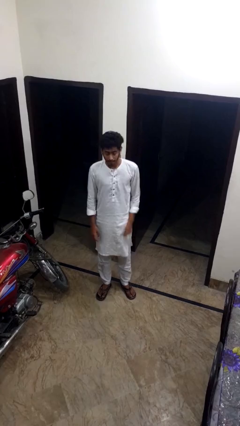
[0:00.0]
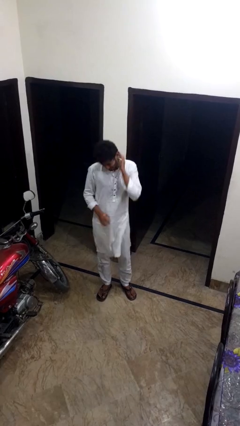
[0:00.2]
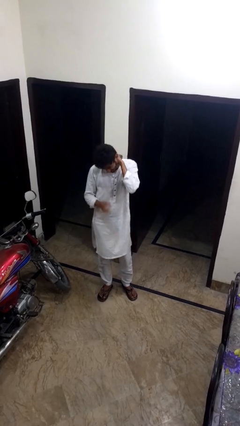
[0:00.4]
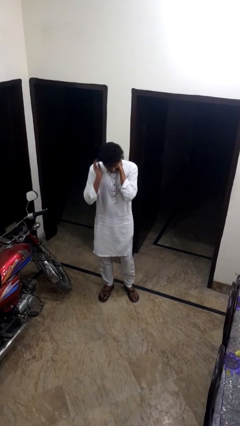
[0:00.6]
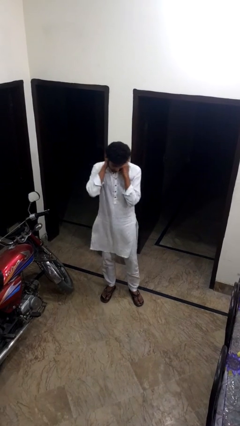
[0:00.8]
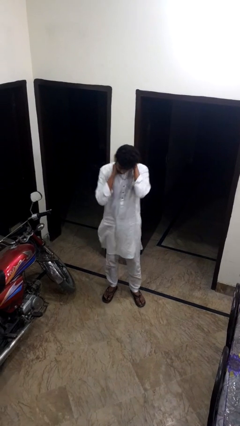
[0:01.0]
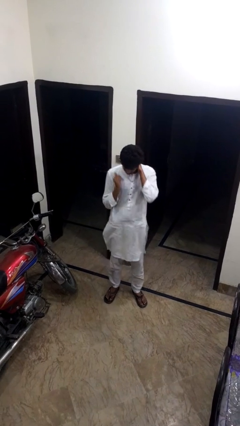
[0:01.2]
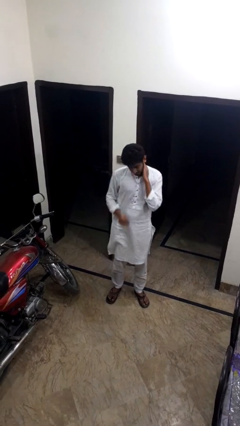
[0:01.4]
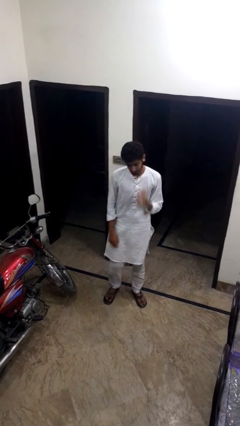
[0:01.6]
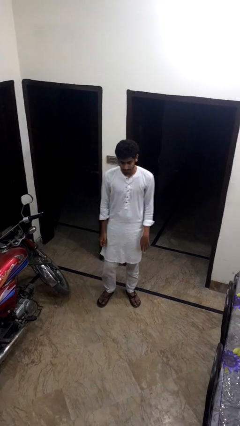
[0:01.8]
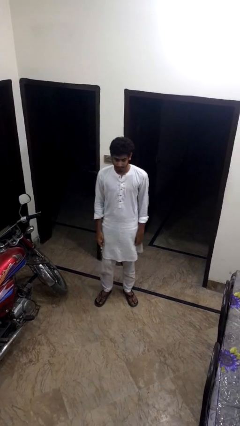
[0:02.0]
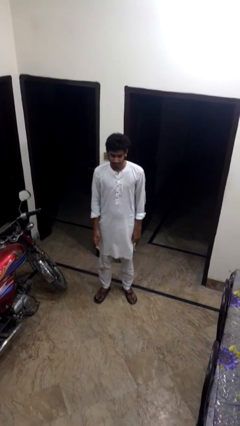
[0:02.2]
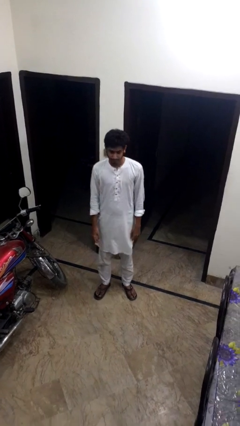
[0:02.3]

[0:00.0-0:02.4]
person rubs neck

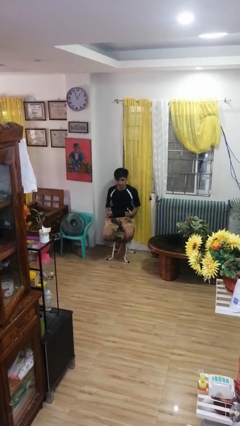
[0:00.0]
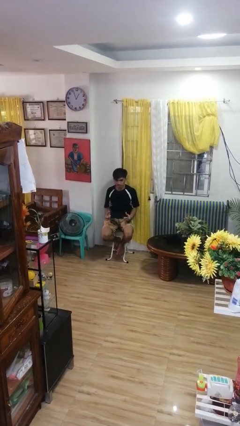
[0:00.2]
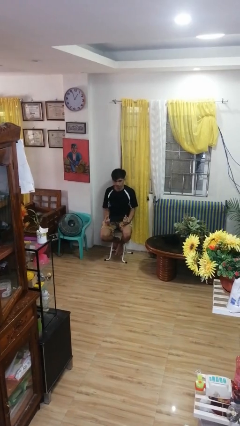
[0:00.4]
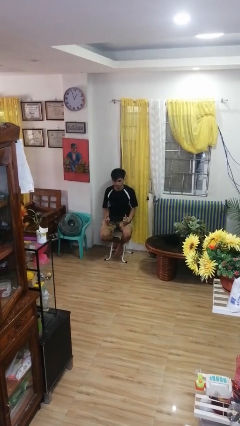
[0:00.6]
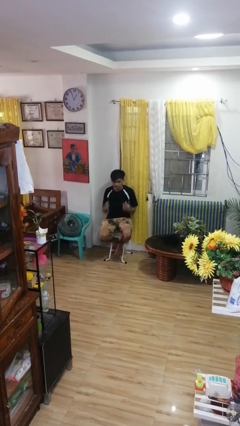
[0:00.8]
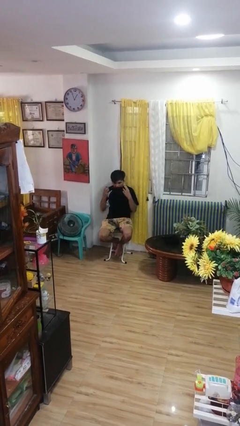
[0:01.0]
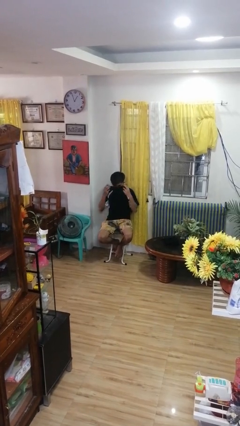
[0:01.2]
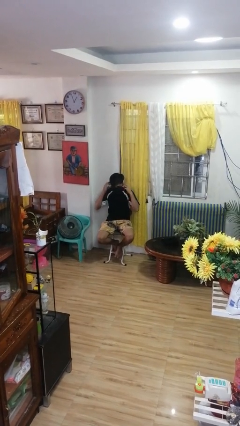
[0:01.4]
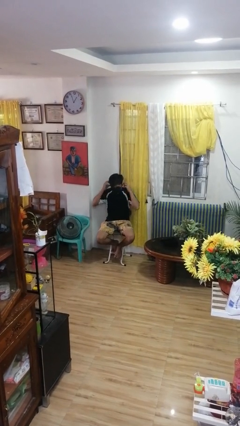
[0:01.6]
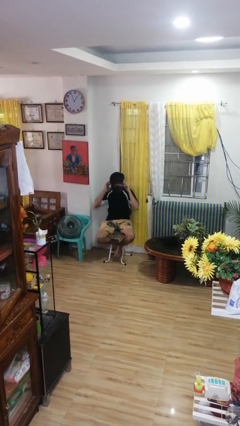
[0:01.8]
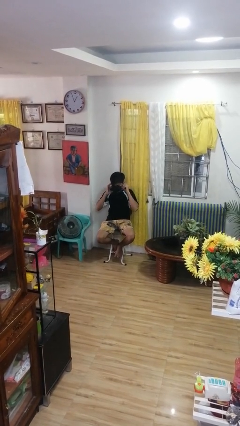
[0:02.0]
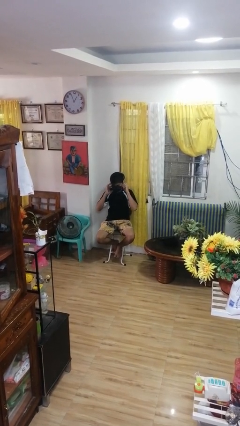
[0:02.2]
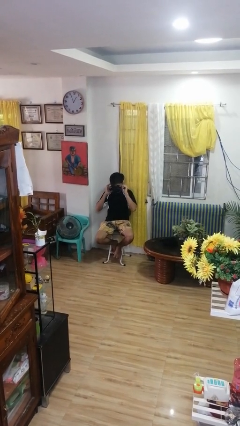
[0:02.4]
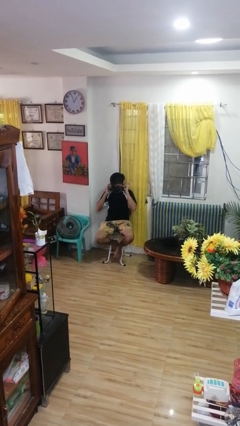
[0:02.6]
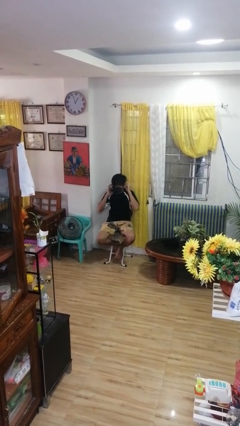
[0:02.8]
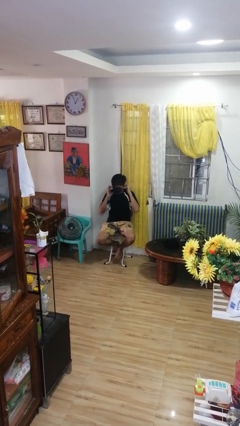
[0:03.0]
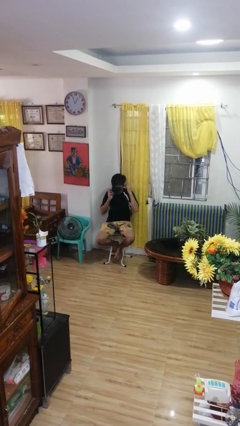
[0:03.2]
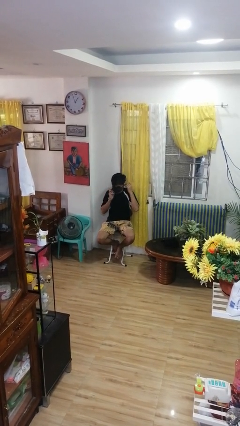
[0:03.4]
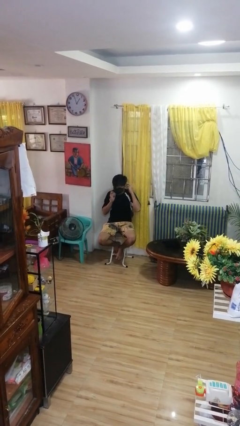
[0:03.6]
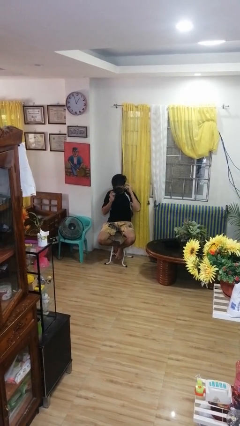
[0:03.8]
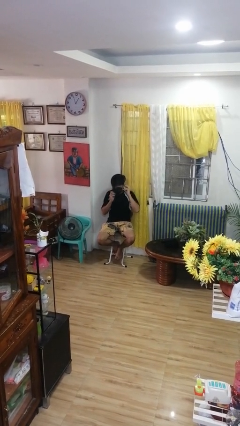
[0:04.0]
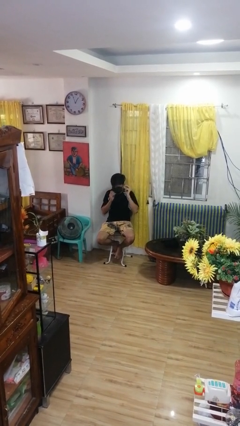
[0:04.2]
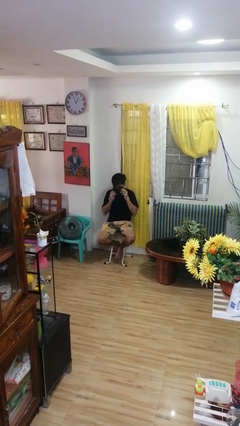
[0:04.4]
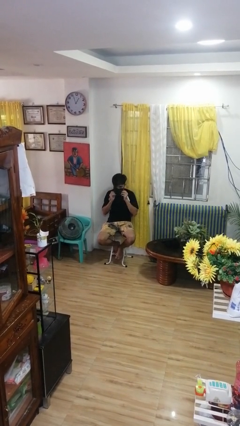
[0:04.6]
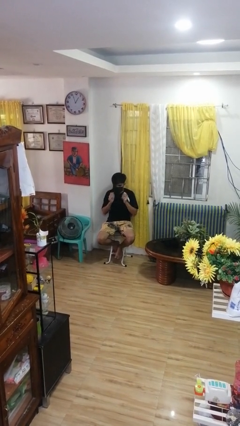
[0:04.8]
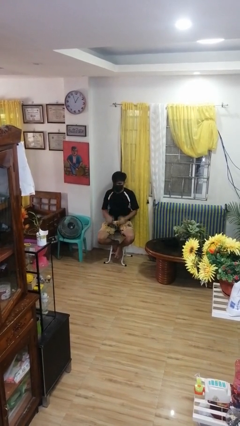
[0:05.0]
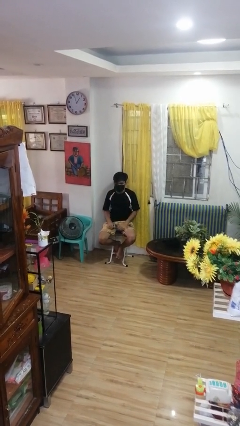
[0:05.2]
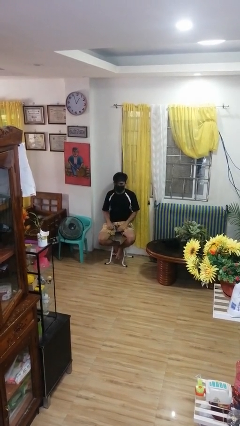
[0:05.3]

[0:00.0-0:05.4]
person puts on facemask

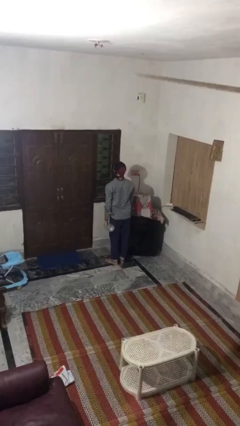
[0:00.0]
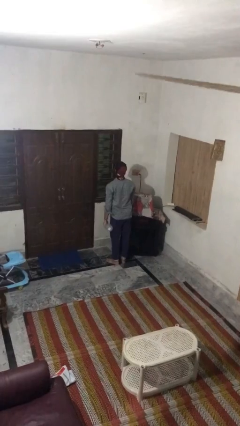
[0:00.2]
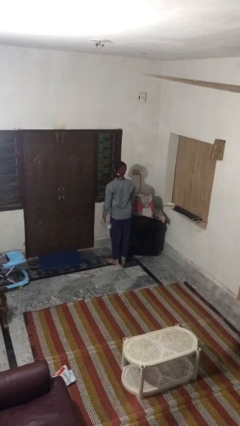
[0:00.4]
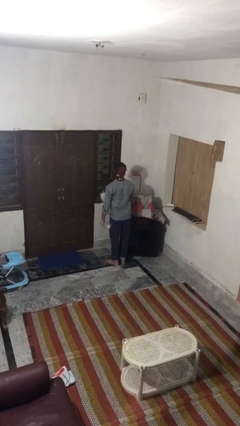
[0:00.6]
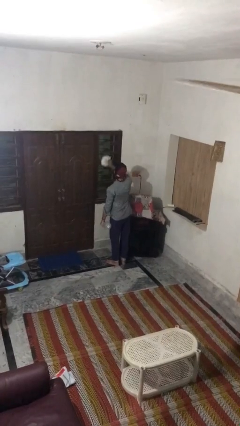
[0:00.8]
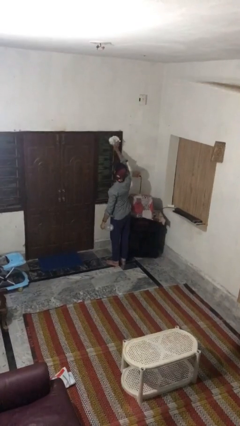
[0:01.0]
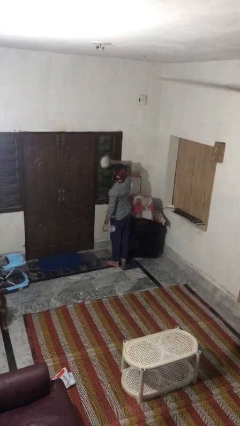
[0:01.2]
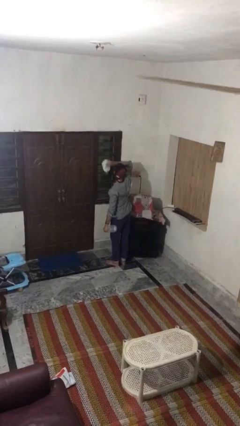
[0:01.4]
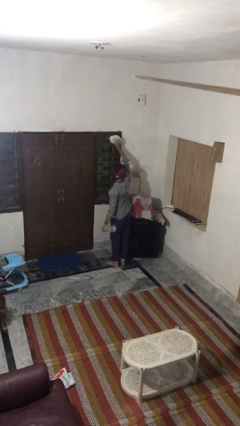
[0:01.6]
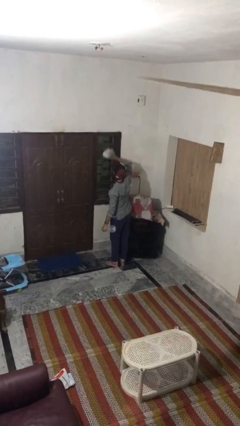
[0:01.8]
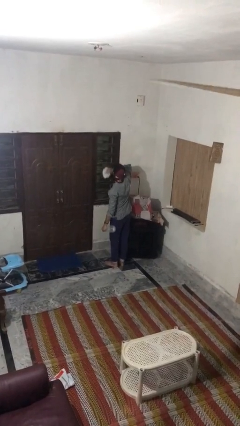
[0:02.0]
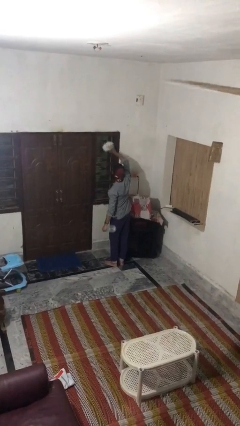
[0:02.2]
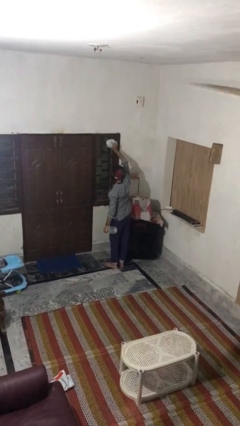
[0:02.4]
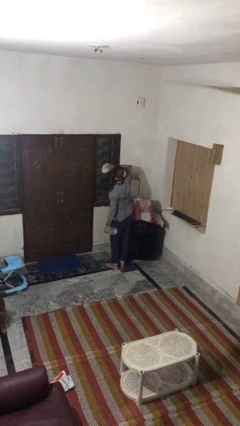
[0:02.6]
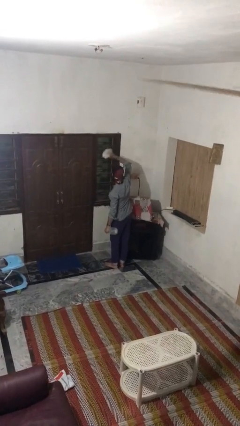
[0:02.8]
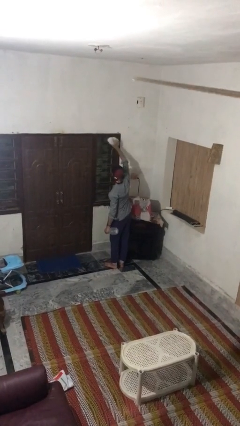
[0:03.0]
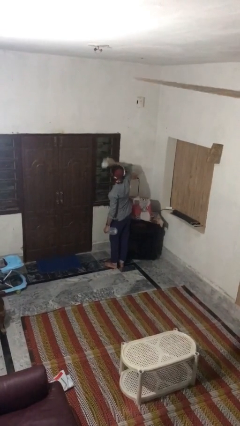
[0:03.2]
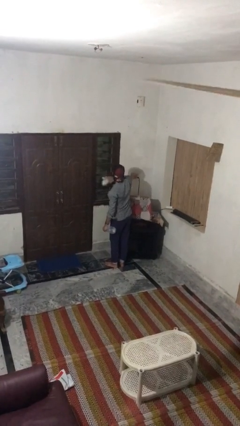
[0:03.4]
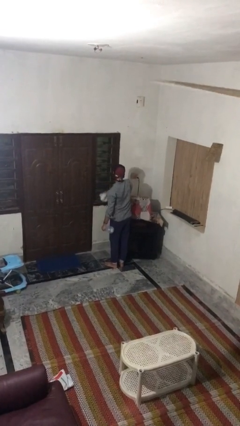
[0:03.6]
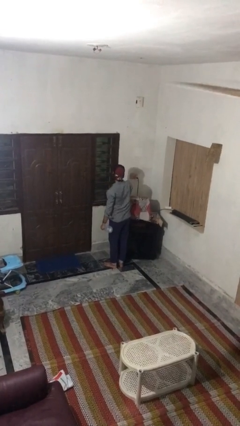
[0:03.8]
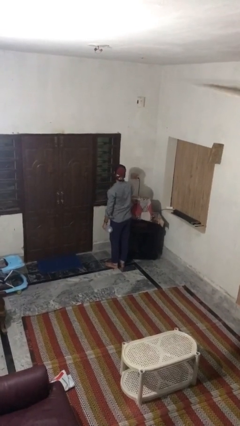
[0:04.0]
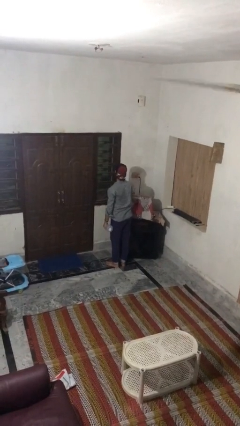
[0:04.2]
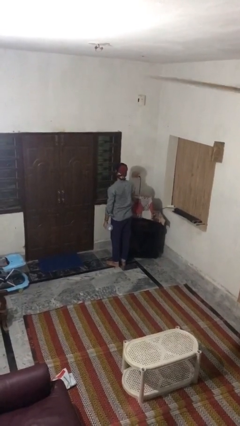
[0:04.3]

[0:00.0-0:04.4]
person washes window

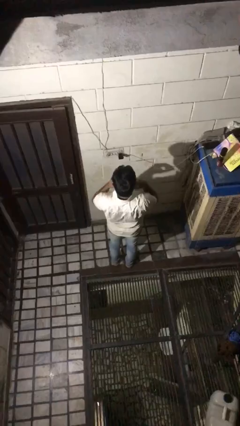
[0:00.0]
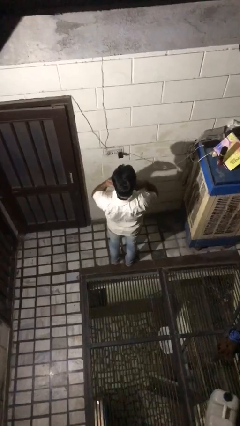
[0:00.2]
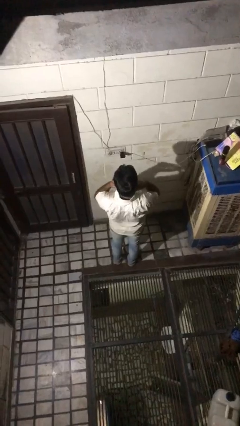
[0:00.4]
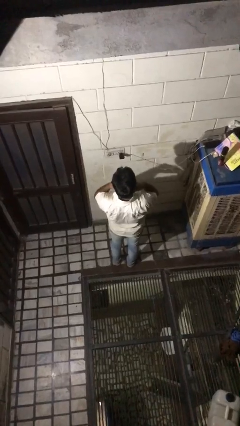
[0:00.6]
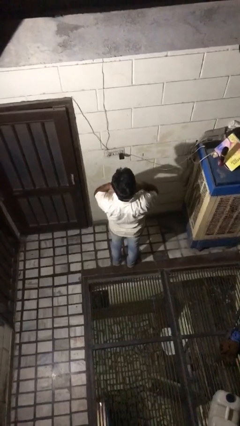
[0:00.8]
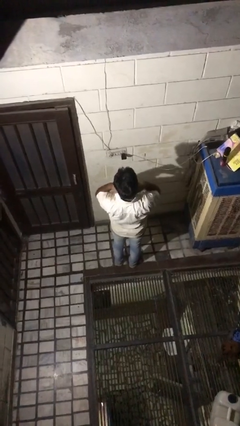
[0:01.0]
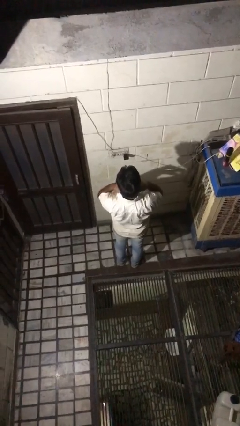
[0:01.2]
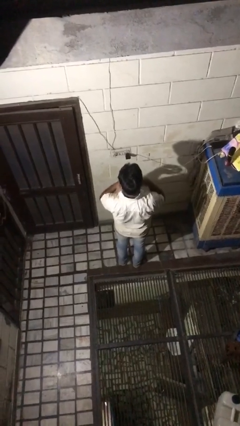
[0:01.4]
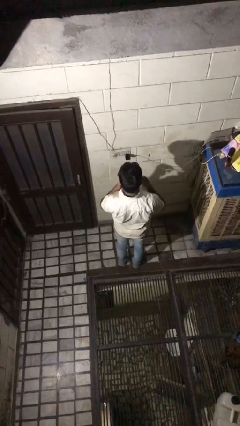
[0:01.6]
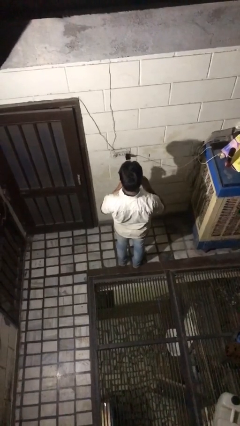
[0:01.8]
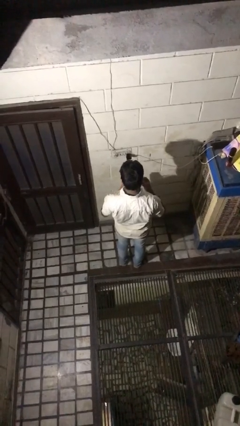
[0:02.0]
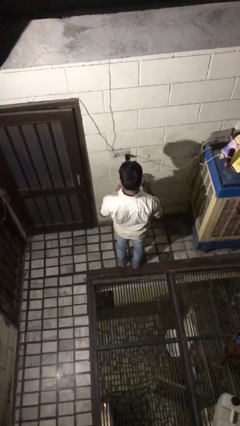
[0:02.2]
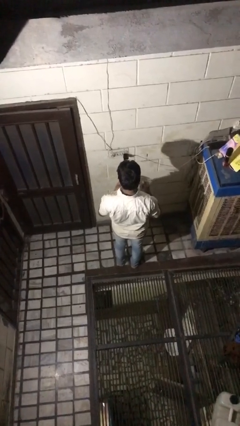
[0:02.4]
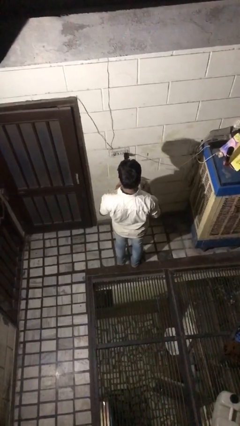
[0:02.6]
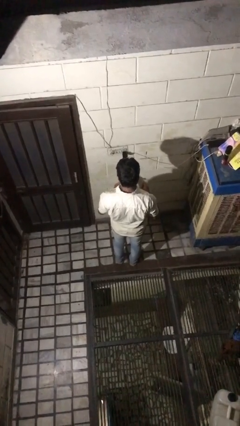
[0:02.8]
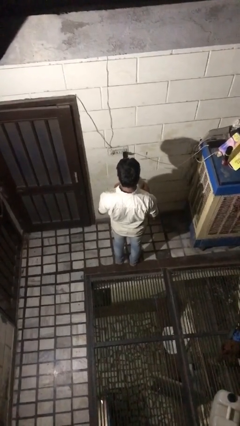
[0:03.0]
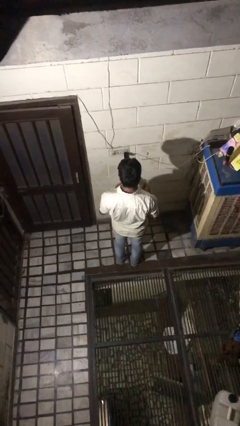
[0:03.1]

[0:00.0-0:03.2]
person takes off necklace

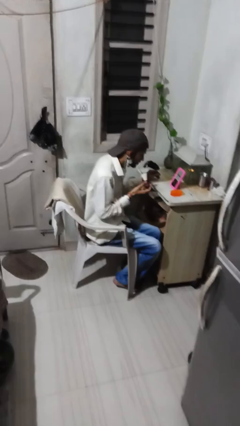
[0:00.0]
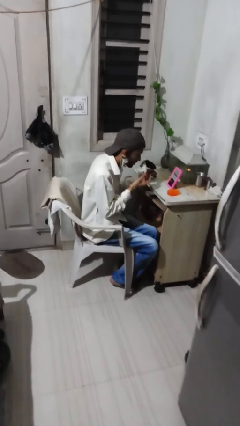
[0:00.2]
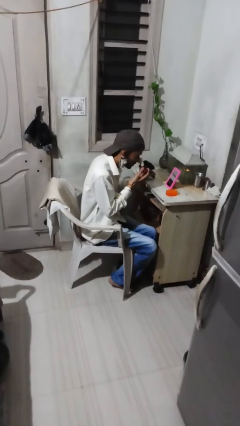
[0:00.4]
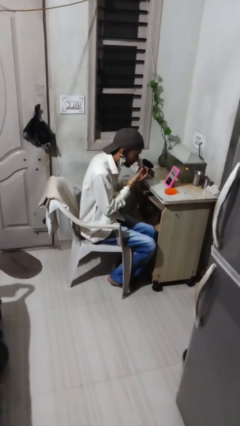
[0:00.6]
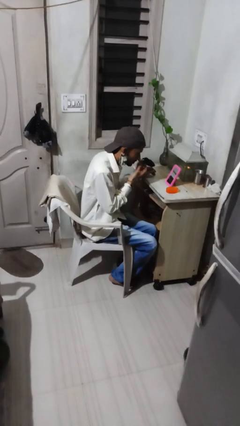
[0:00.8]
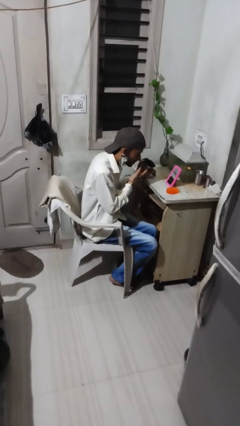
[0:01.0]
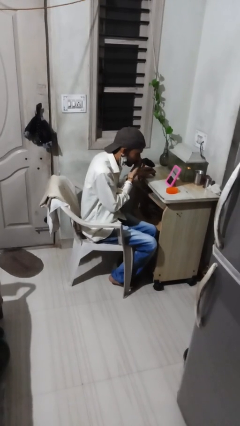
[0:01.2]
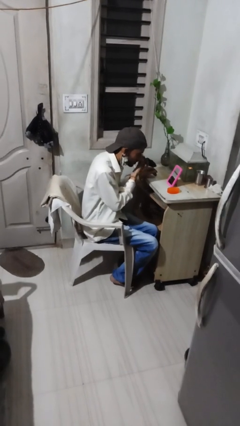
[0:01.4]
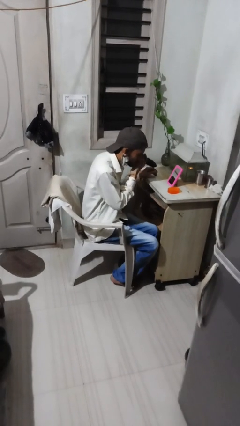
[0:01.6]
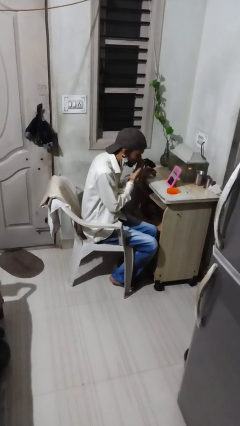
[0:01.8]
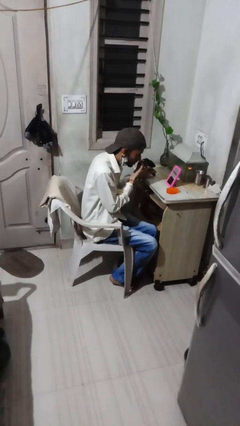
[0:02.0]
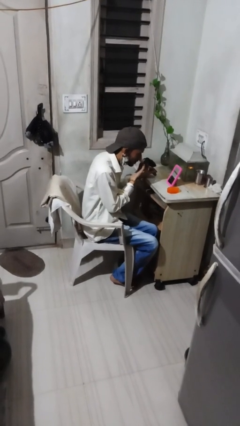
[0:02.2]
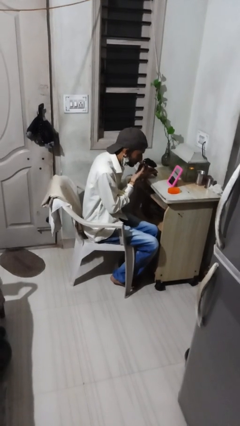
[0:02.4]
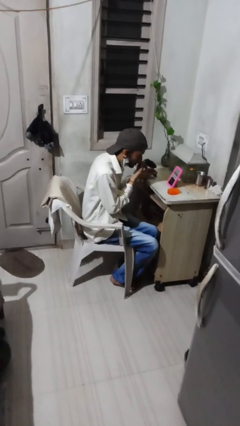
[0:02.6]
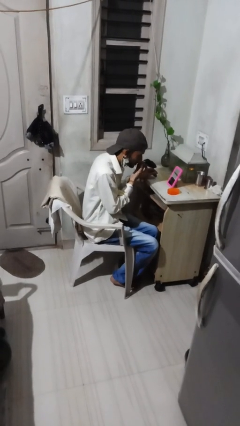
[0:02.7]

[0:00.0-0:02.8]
person applies foundation makeup
